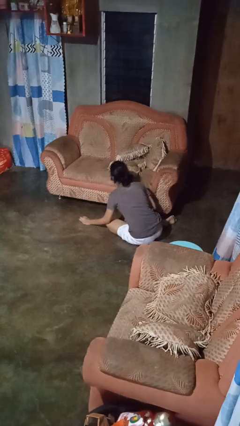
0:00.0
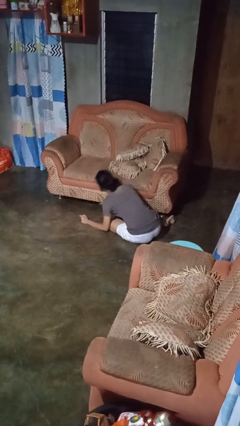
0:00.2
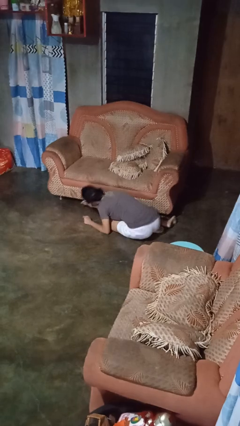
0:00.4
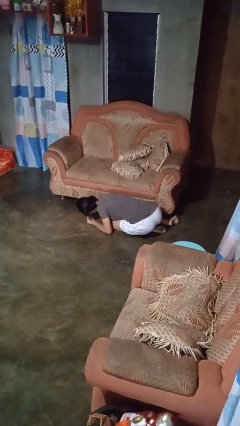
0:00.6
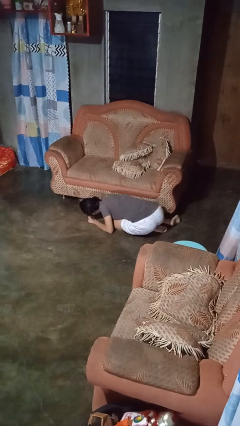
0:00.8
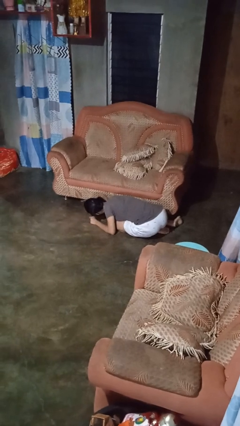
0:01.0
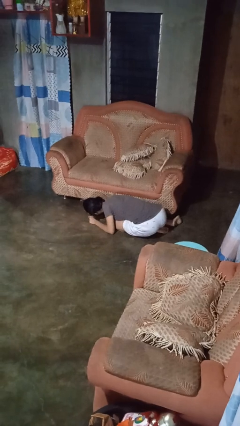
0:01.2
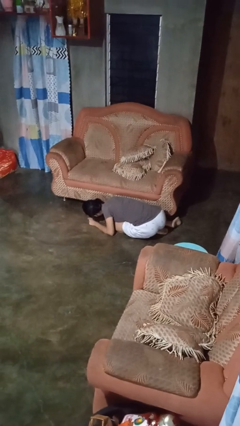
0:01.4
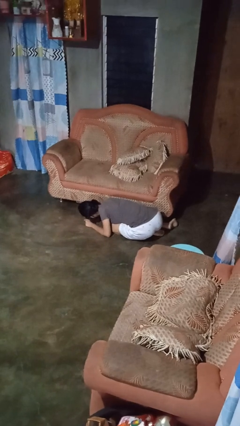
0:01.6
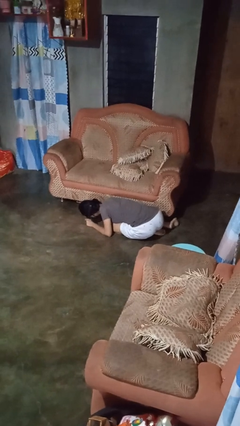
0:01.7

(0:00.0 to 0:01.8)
person searches under couch

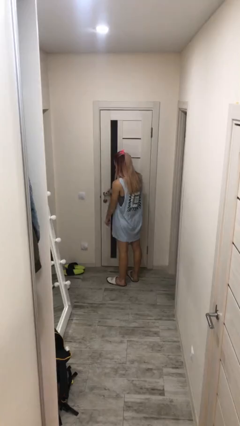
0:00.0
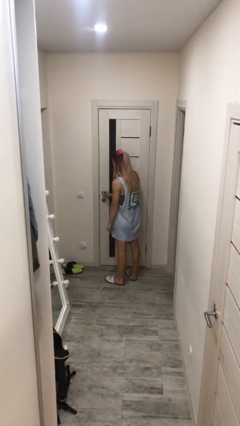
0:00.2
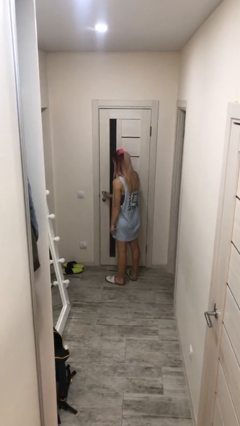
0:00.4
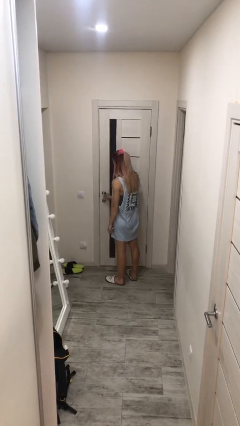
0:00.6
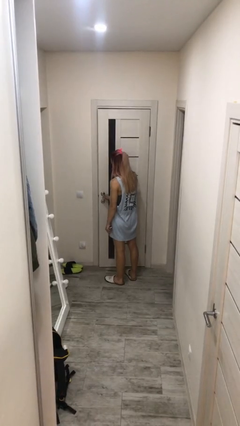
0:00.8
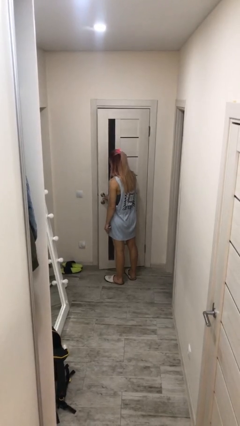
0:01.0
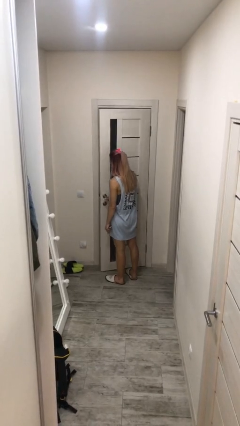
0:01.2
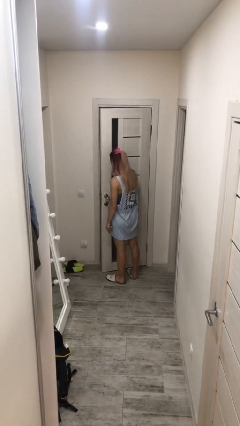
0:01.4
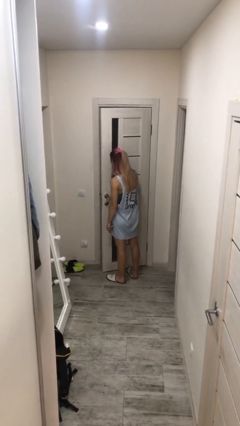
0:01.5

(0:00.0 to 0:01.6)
person opens facility door

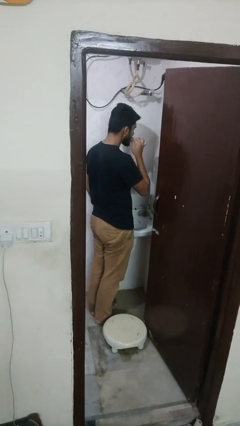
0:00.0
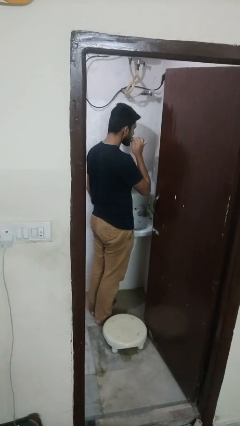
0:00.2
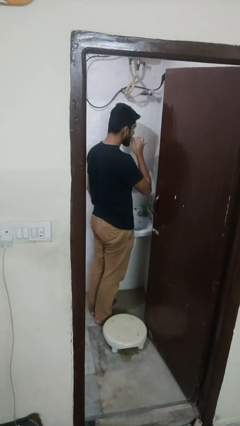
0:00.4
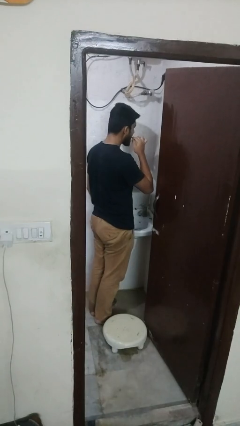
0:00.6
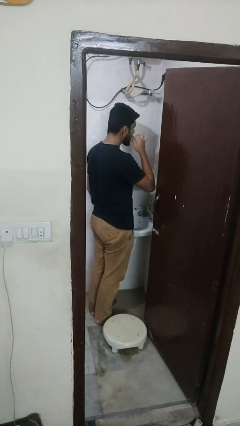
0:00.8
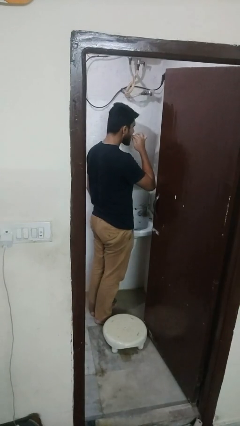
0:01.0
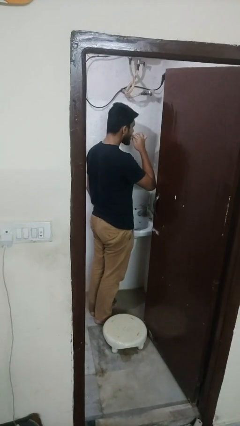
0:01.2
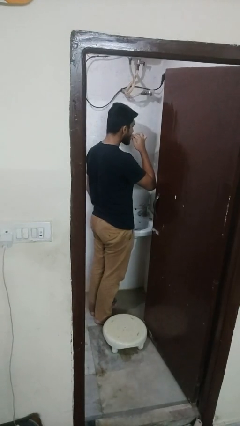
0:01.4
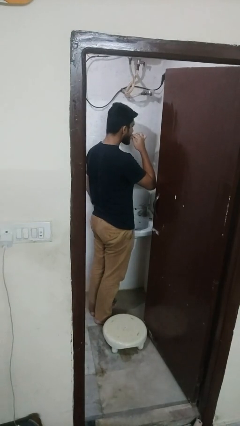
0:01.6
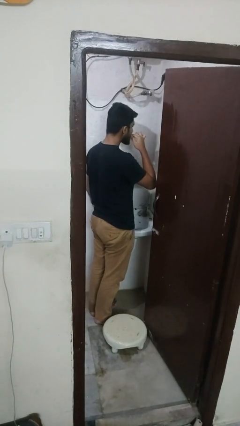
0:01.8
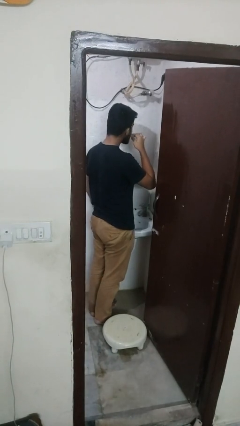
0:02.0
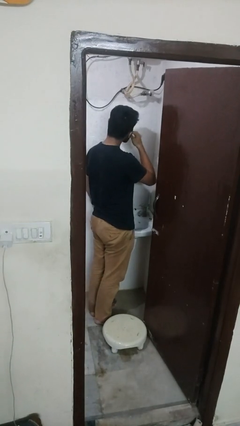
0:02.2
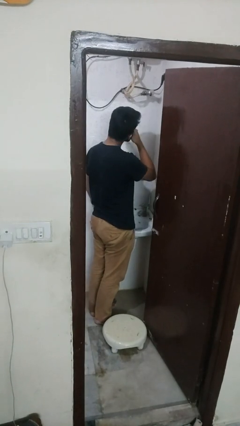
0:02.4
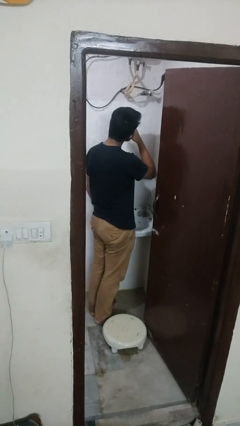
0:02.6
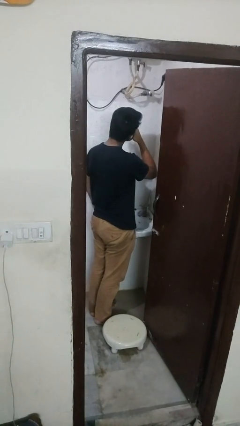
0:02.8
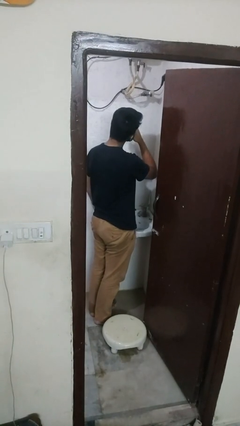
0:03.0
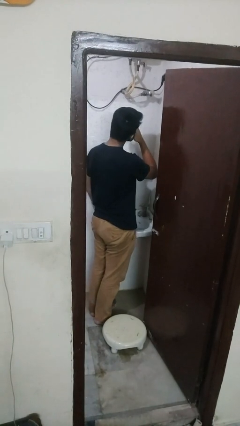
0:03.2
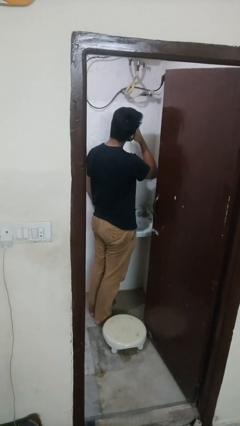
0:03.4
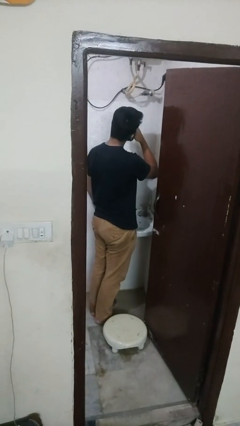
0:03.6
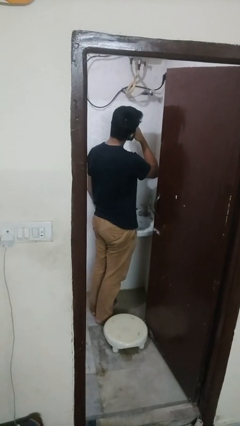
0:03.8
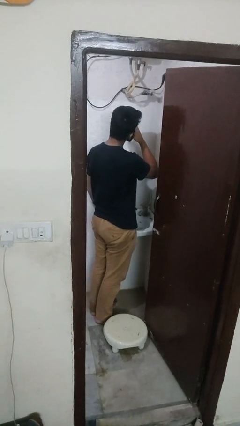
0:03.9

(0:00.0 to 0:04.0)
person flosses

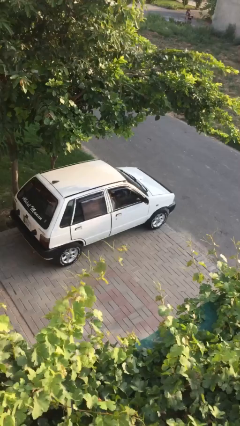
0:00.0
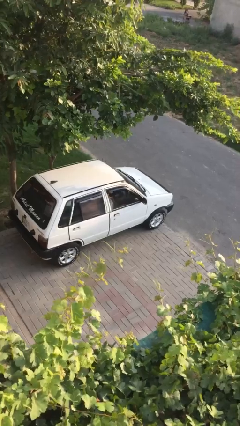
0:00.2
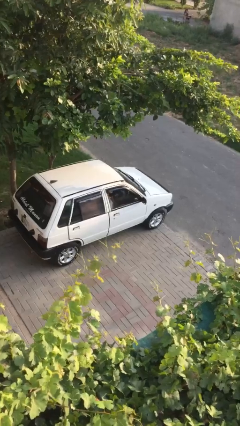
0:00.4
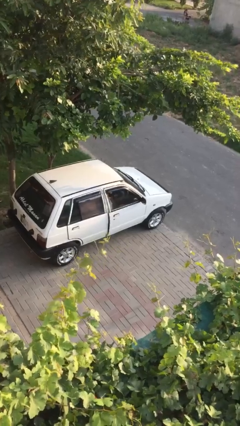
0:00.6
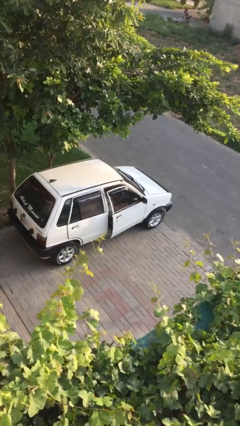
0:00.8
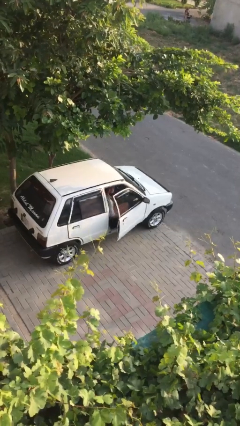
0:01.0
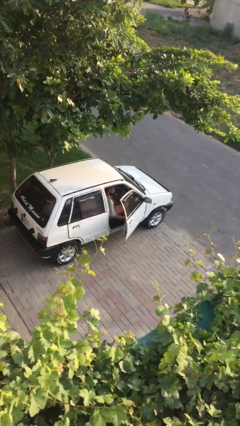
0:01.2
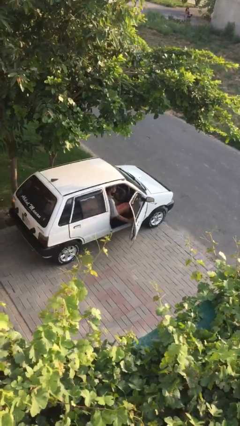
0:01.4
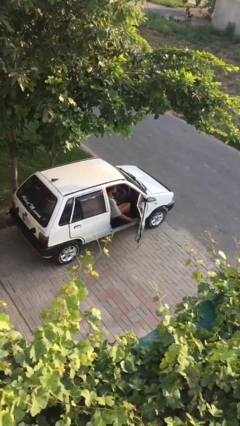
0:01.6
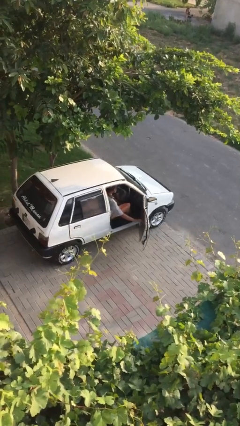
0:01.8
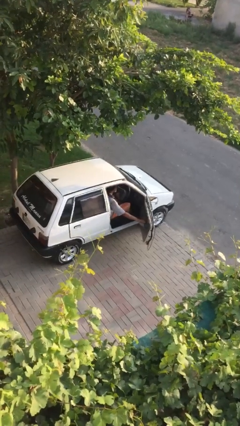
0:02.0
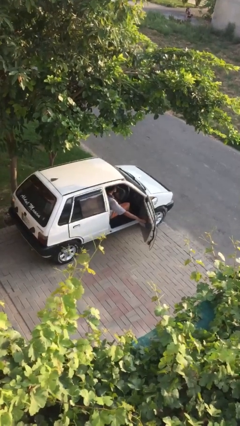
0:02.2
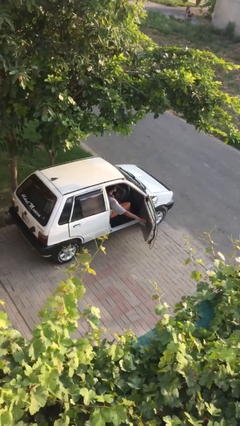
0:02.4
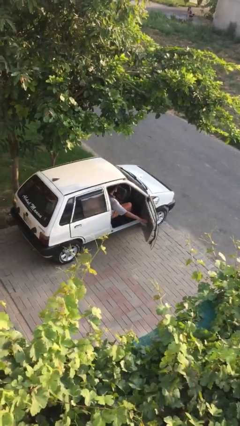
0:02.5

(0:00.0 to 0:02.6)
person opens car door

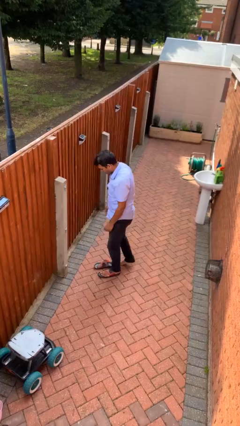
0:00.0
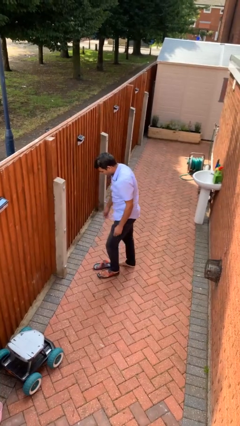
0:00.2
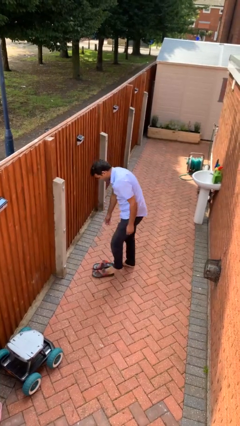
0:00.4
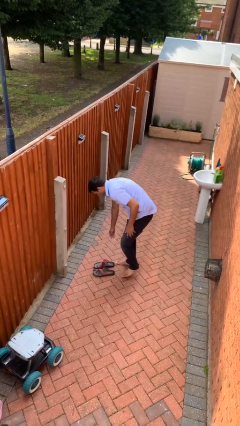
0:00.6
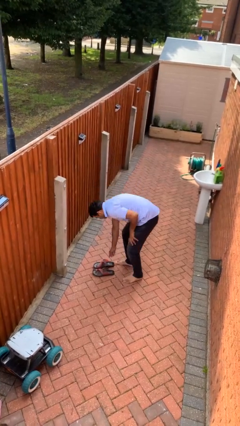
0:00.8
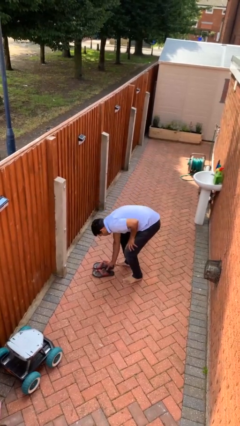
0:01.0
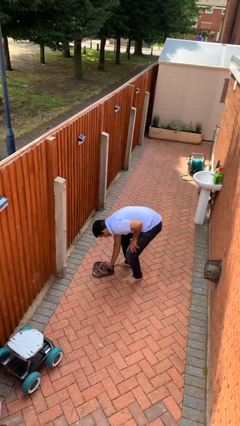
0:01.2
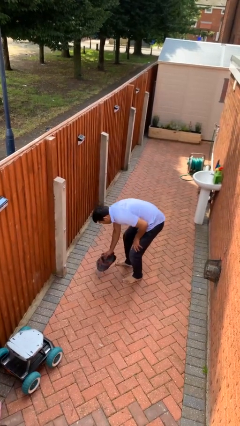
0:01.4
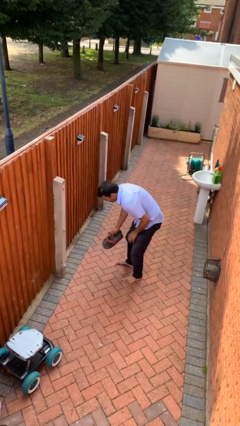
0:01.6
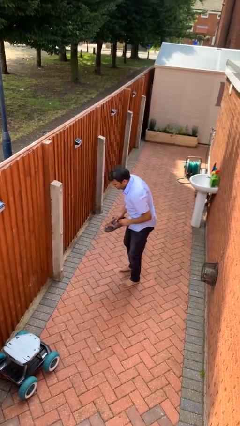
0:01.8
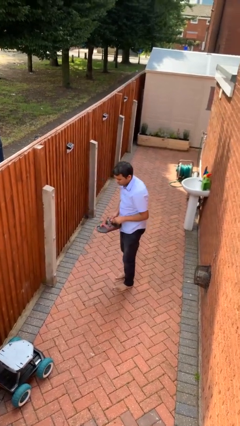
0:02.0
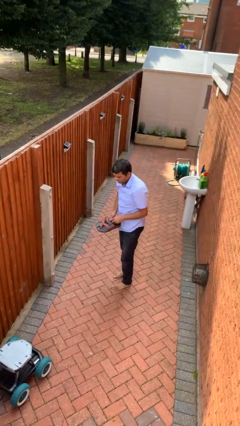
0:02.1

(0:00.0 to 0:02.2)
person takes off shoes

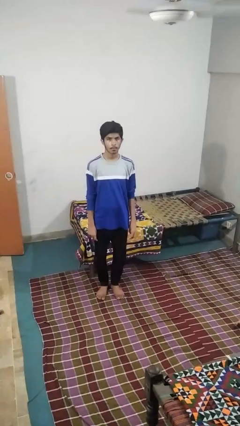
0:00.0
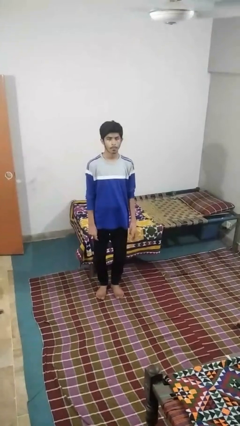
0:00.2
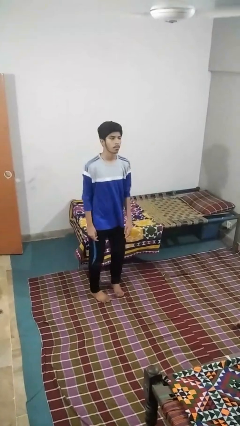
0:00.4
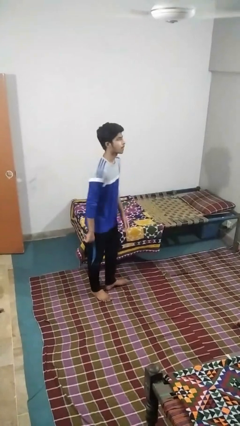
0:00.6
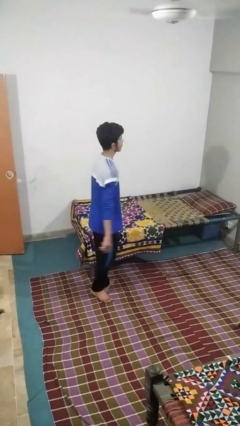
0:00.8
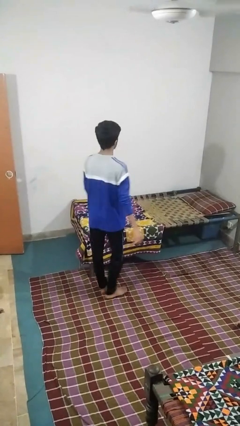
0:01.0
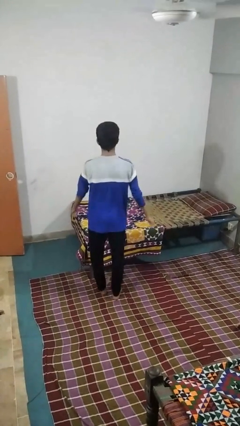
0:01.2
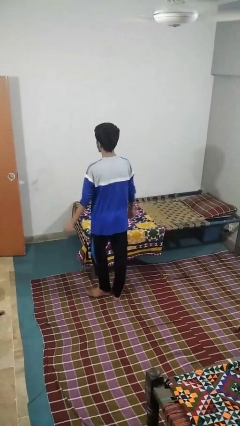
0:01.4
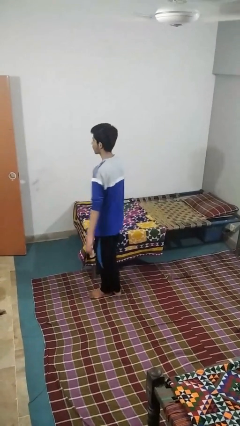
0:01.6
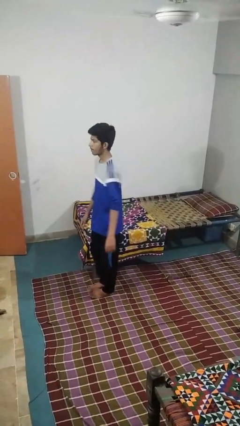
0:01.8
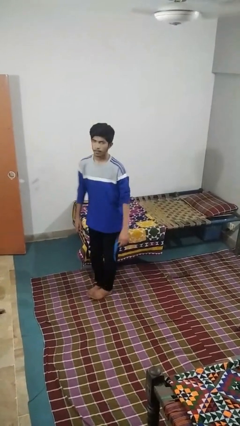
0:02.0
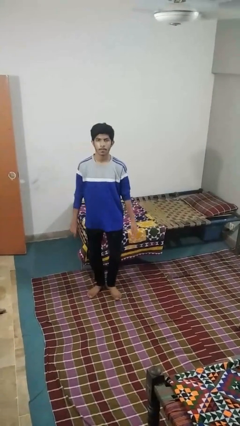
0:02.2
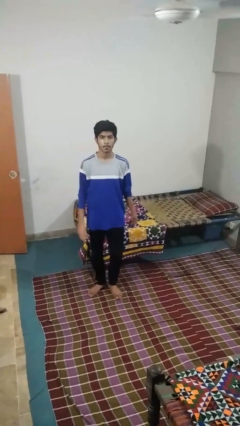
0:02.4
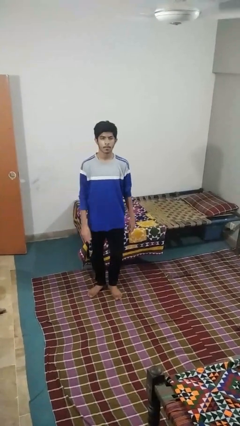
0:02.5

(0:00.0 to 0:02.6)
person twirls

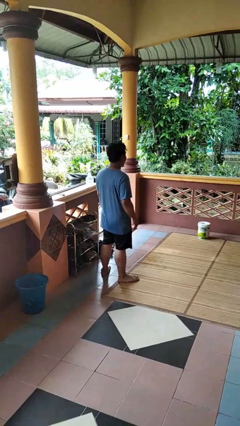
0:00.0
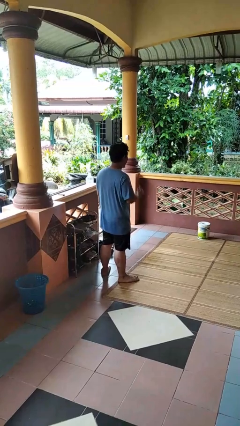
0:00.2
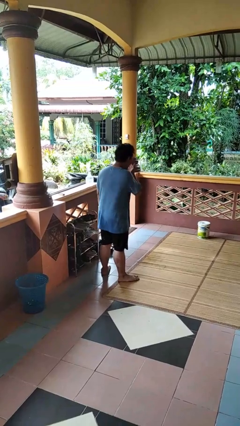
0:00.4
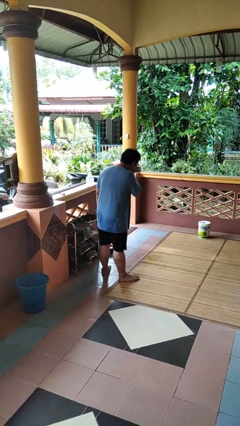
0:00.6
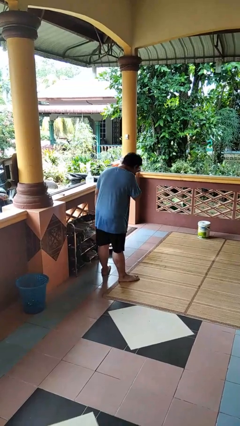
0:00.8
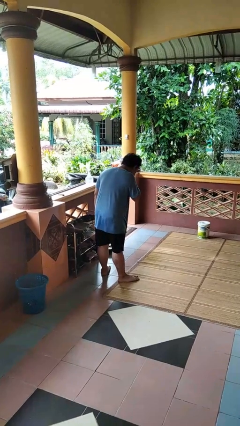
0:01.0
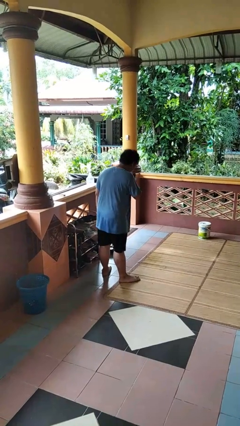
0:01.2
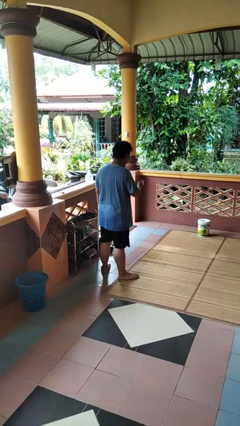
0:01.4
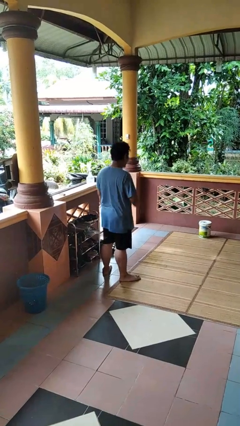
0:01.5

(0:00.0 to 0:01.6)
person sneezes into hand

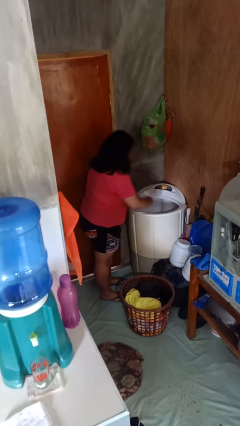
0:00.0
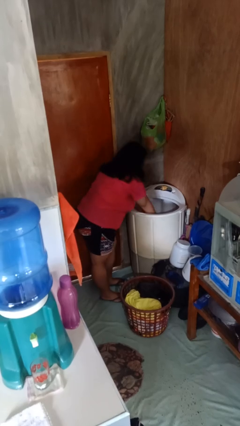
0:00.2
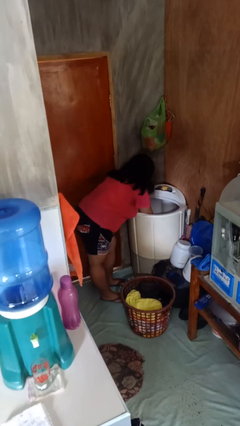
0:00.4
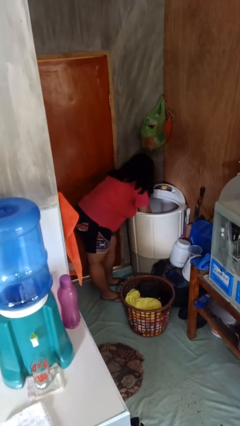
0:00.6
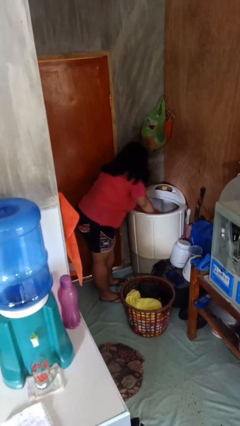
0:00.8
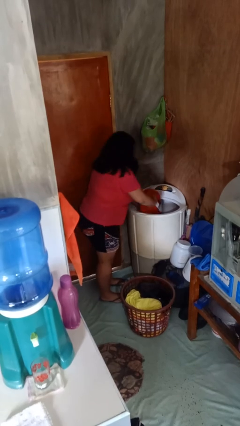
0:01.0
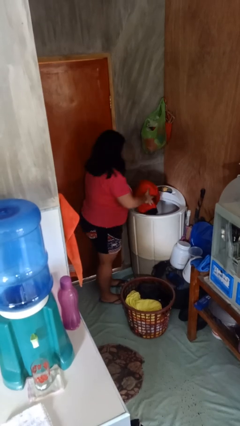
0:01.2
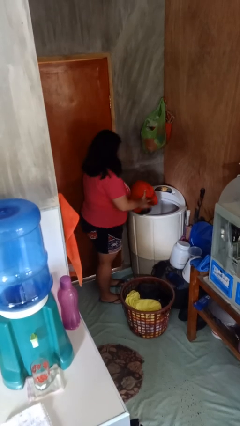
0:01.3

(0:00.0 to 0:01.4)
person unloads dryer
